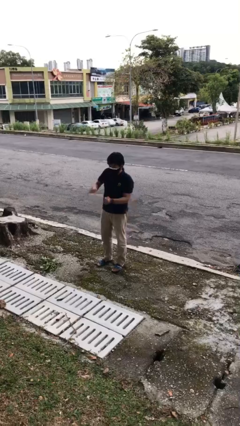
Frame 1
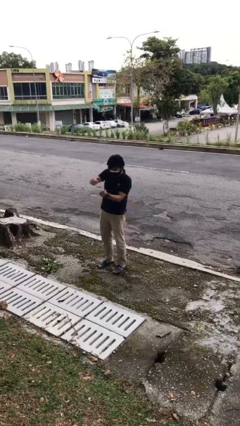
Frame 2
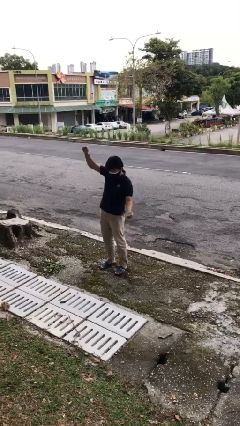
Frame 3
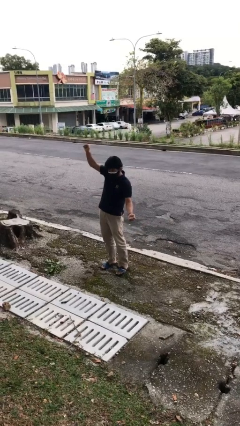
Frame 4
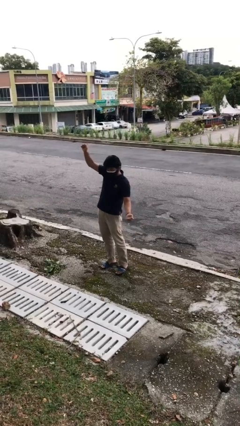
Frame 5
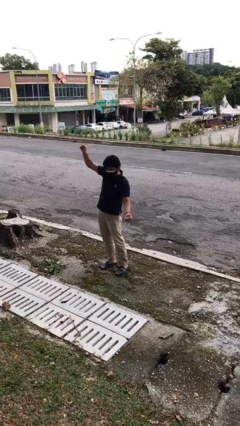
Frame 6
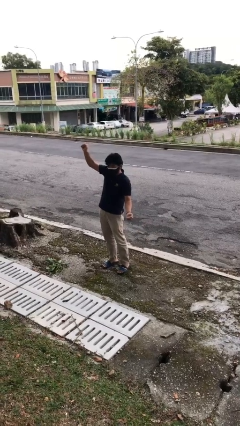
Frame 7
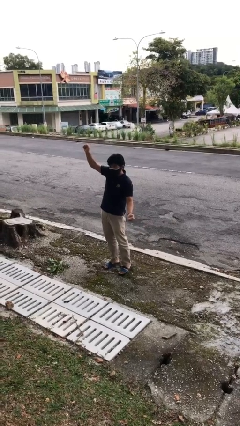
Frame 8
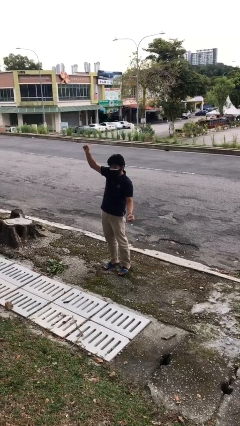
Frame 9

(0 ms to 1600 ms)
person gestures zoom in

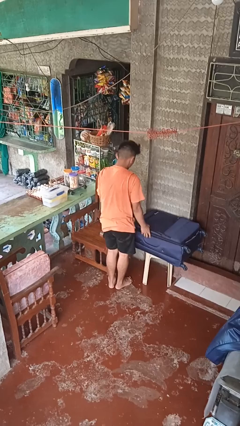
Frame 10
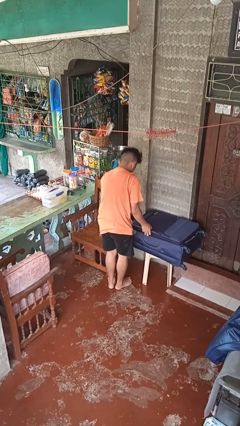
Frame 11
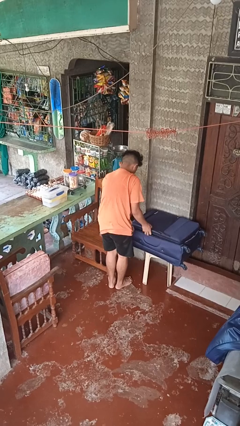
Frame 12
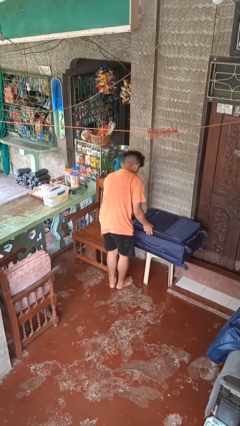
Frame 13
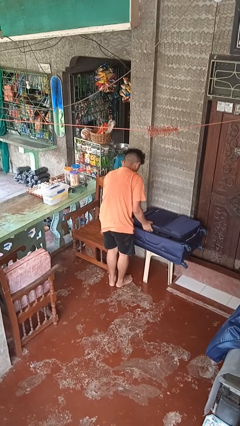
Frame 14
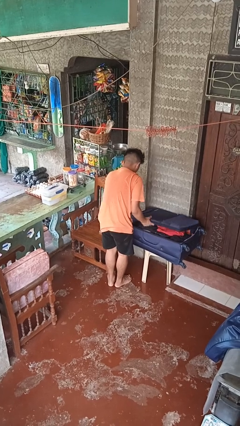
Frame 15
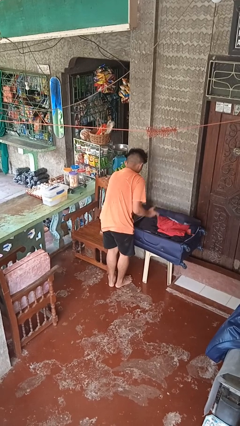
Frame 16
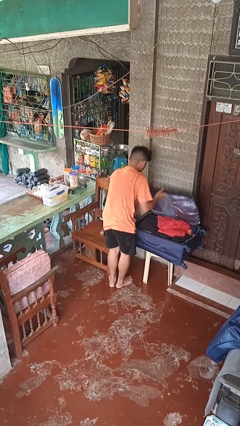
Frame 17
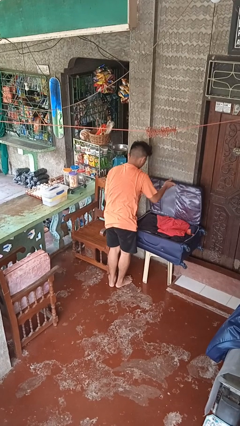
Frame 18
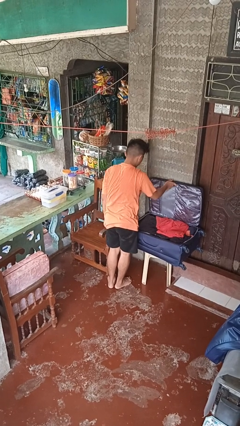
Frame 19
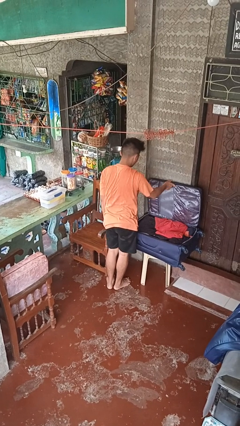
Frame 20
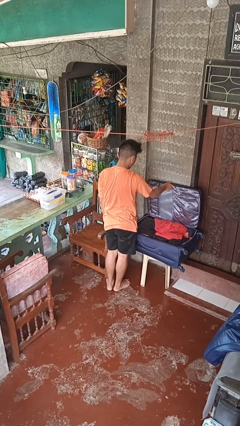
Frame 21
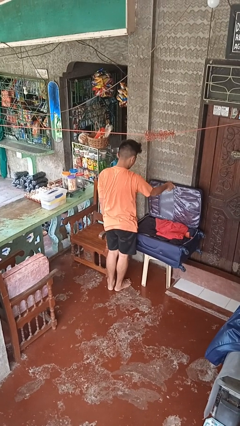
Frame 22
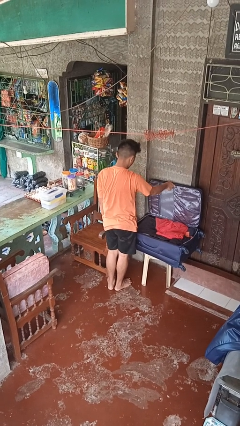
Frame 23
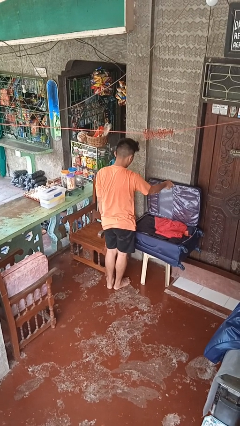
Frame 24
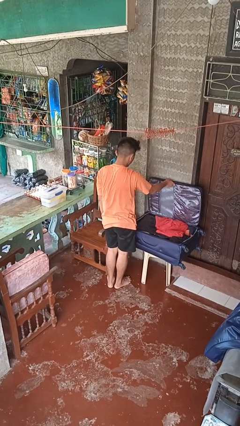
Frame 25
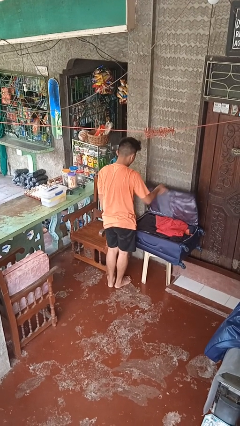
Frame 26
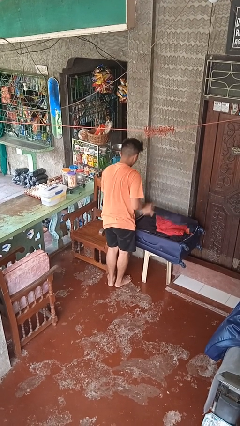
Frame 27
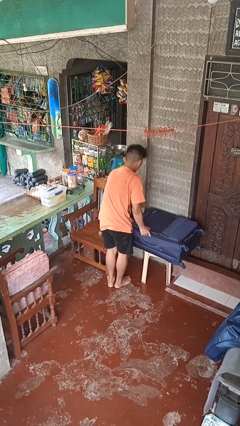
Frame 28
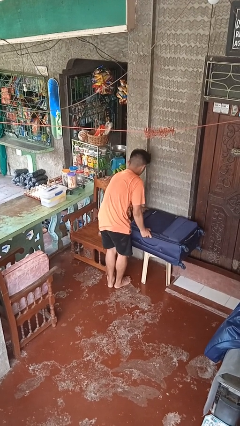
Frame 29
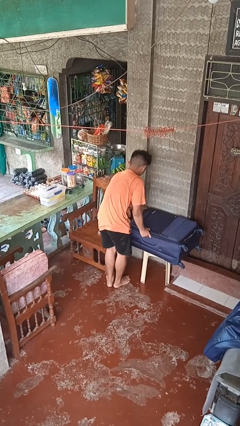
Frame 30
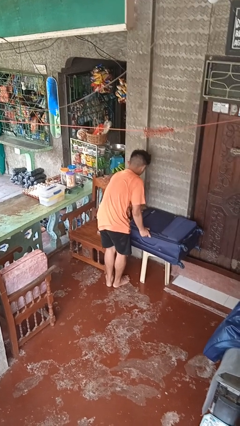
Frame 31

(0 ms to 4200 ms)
person opens suitcase

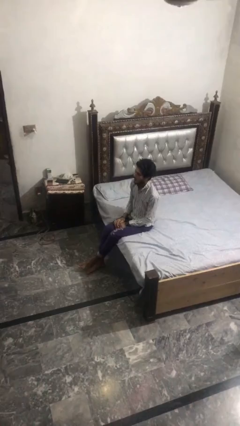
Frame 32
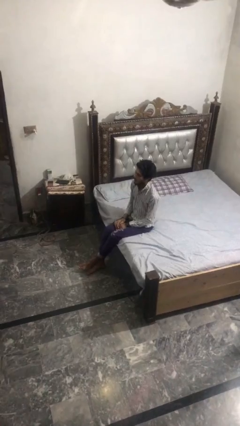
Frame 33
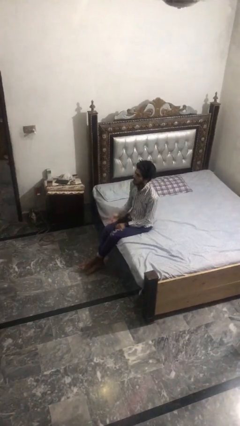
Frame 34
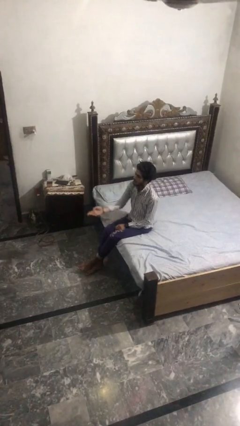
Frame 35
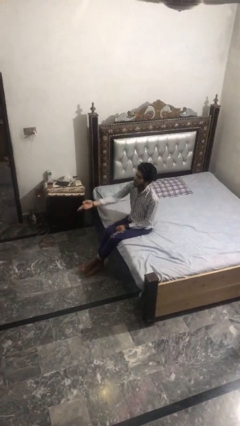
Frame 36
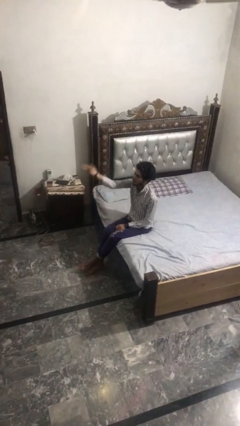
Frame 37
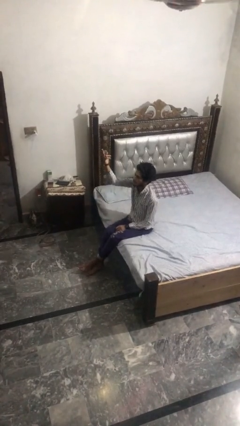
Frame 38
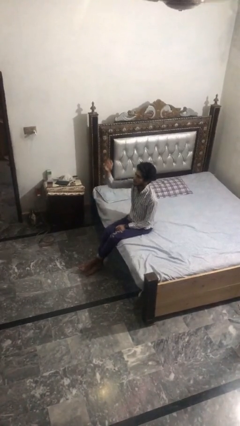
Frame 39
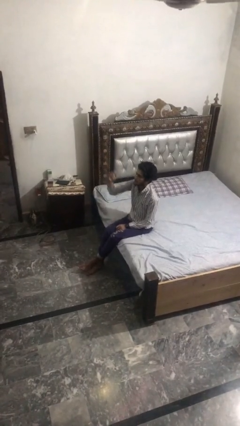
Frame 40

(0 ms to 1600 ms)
person gestures swipe up

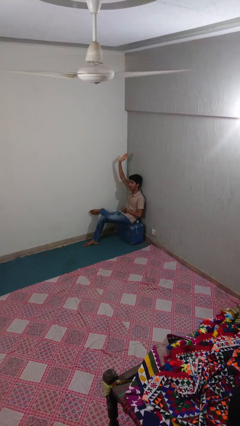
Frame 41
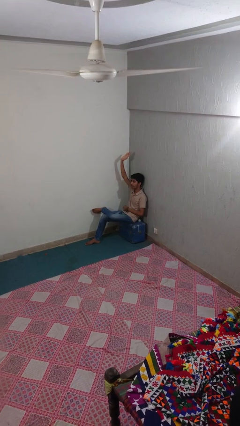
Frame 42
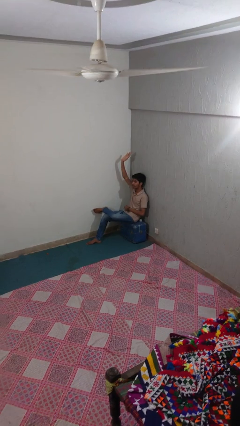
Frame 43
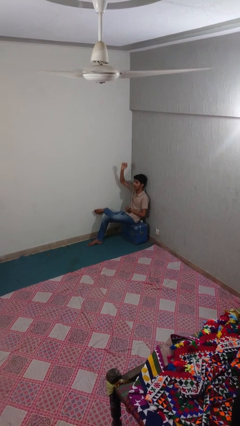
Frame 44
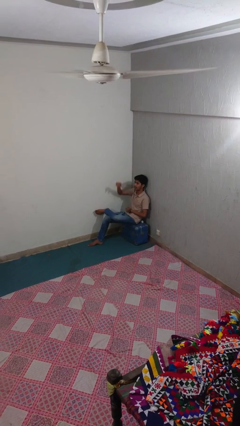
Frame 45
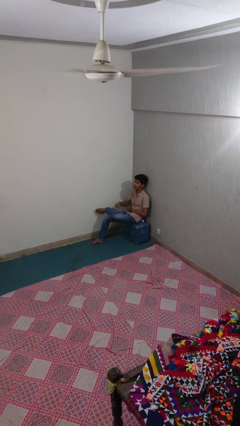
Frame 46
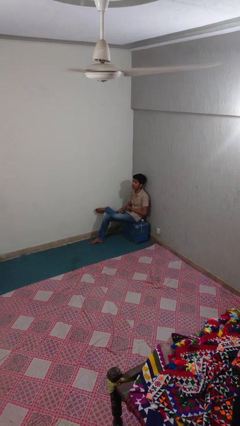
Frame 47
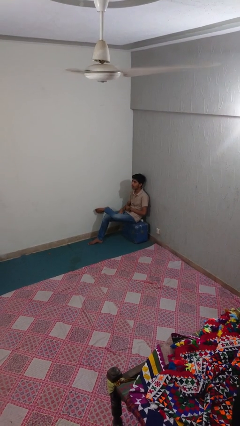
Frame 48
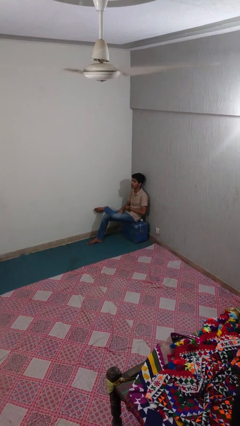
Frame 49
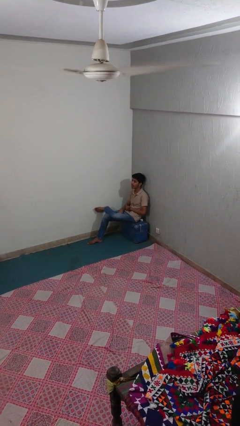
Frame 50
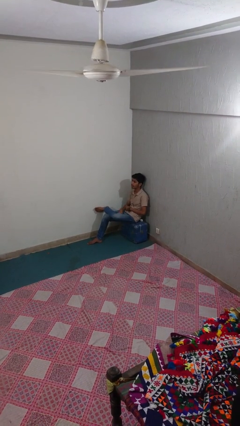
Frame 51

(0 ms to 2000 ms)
person gestures lower hand

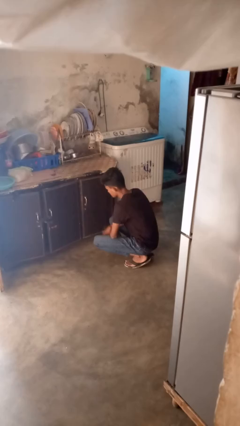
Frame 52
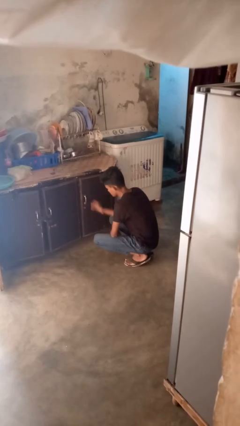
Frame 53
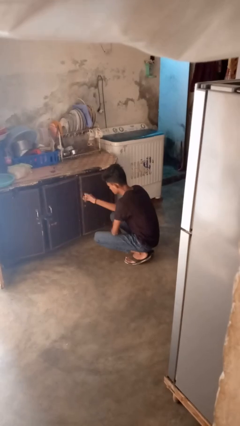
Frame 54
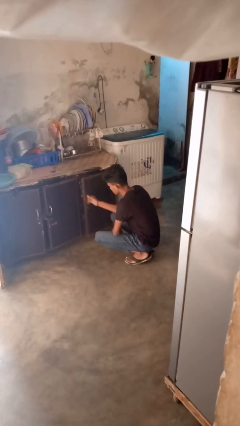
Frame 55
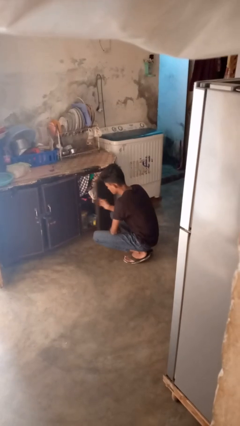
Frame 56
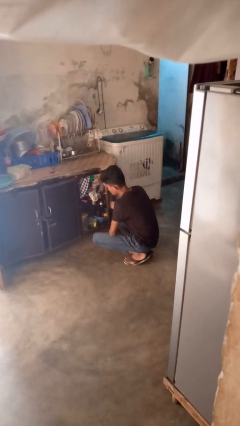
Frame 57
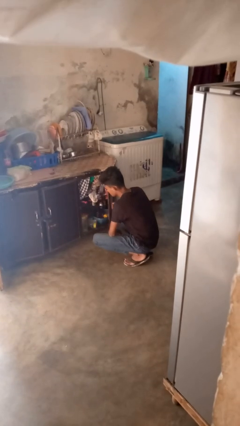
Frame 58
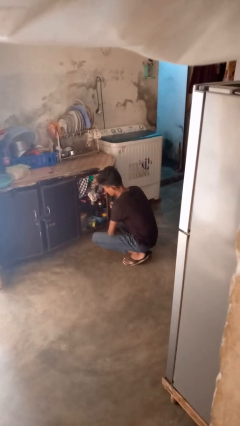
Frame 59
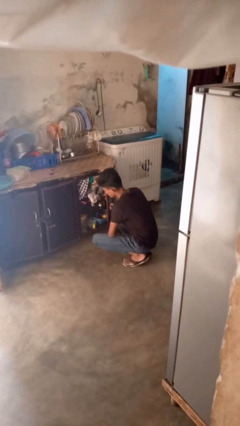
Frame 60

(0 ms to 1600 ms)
person opens cabinet

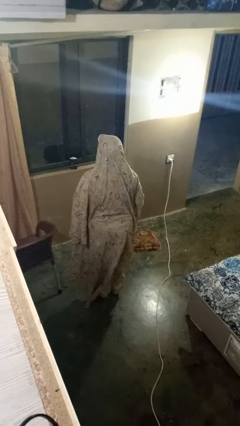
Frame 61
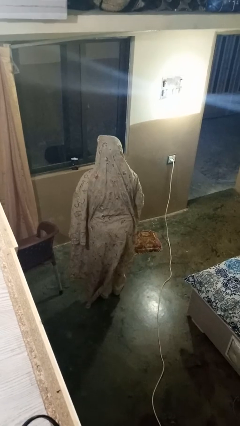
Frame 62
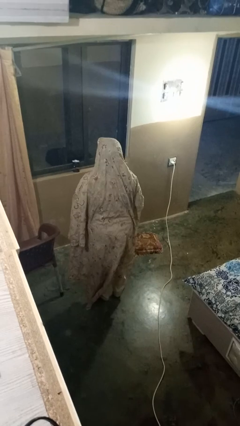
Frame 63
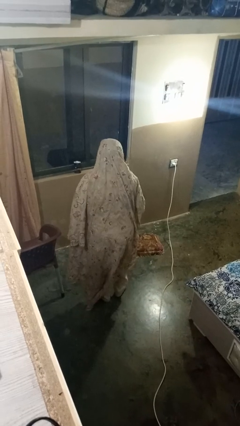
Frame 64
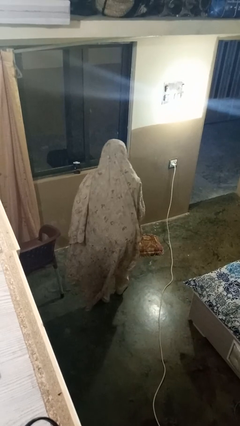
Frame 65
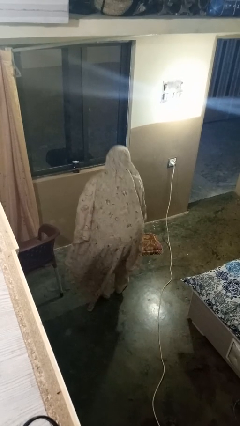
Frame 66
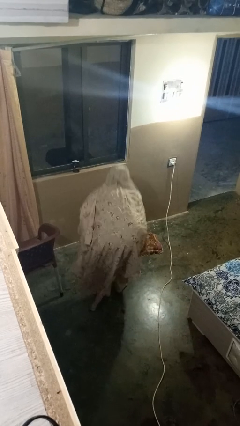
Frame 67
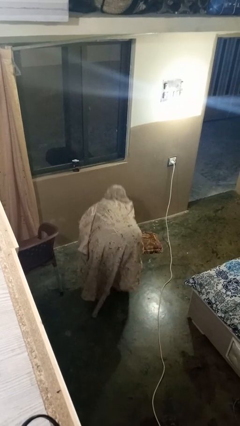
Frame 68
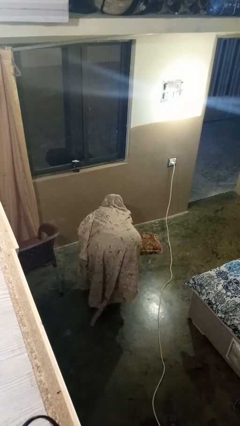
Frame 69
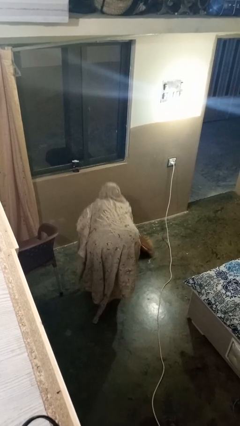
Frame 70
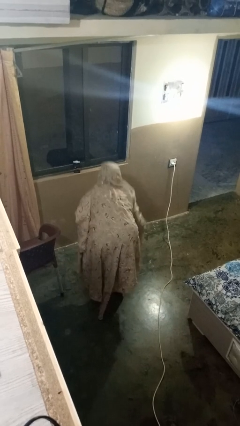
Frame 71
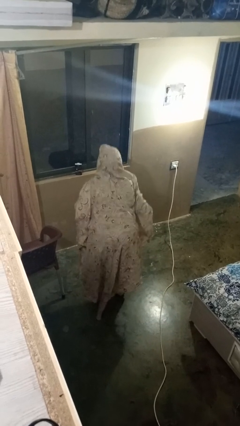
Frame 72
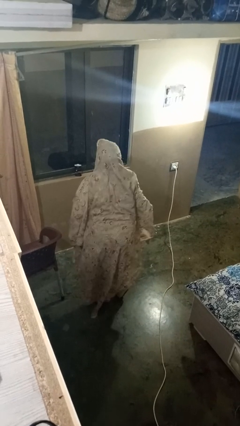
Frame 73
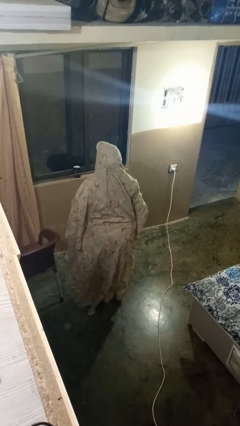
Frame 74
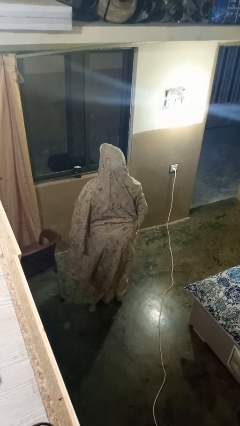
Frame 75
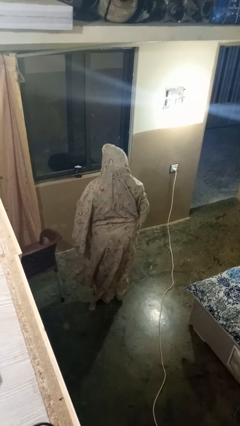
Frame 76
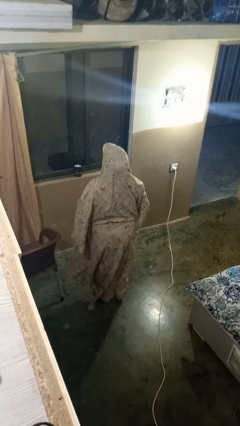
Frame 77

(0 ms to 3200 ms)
person picks up object from floor

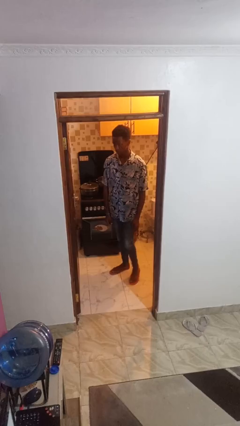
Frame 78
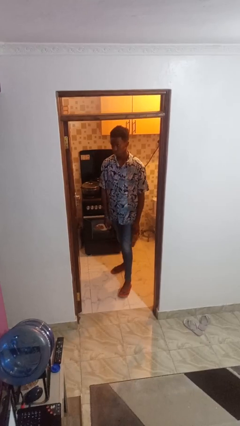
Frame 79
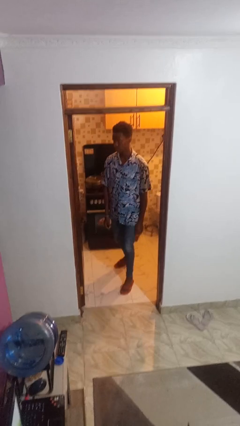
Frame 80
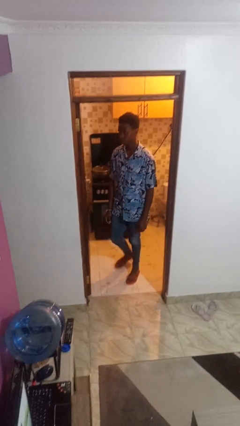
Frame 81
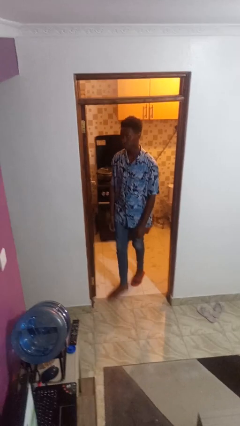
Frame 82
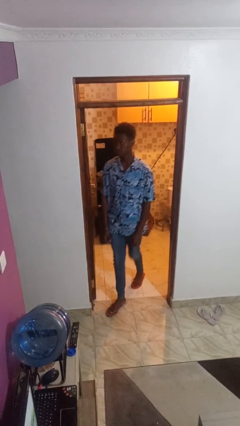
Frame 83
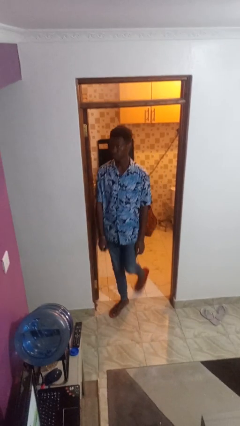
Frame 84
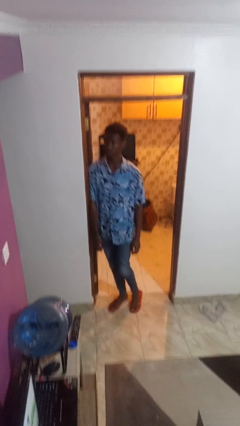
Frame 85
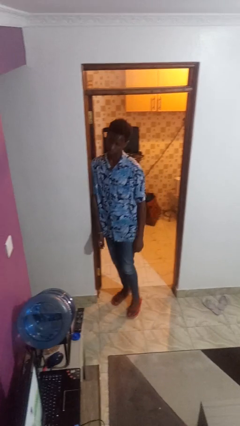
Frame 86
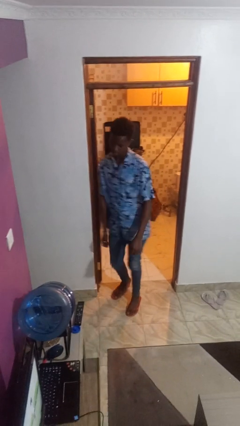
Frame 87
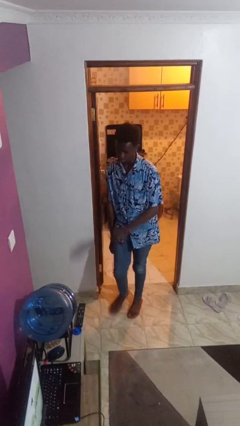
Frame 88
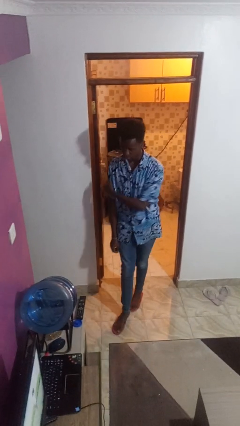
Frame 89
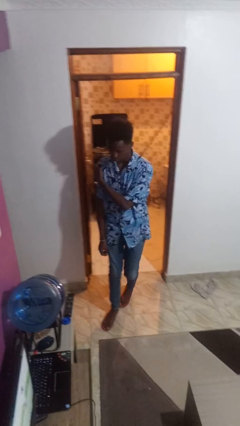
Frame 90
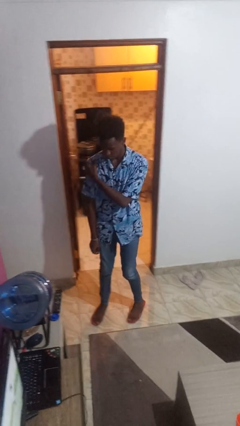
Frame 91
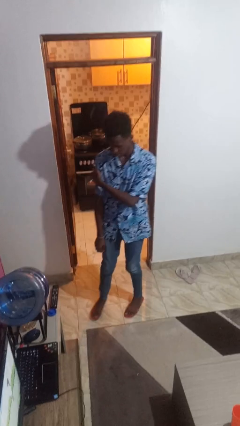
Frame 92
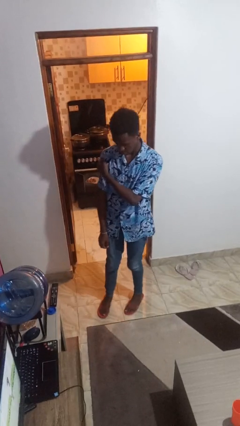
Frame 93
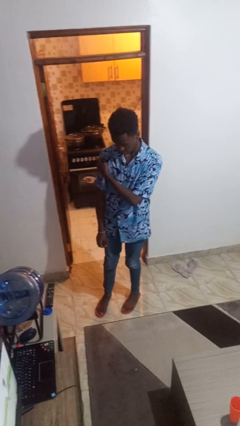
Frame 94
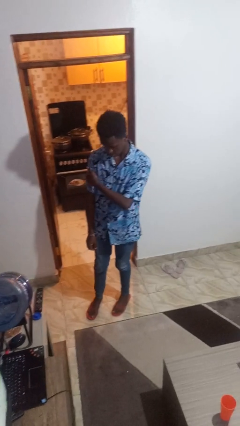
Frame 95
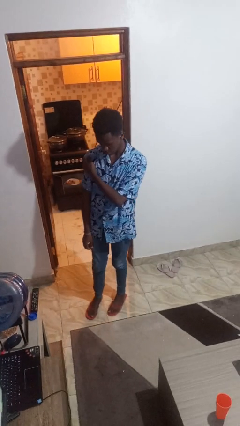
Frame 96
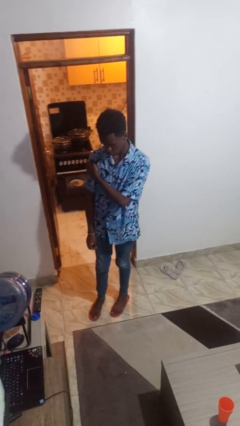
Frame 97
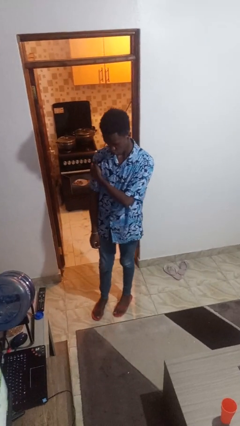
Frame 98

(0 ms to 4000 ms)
person bumps into wall
